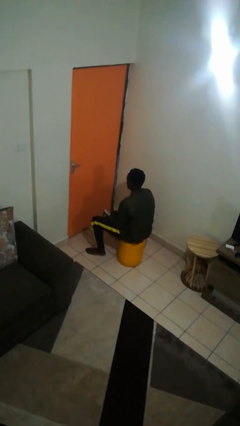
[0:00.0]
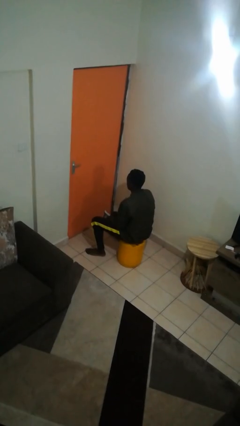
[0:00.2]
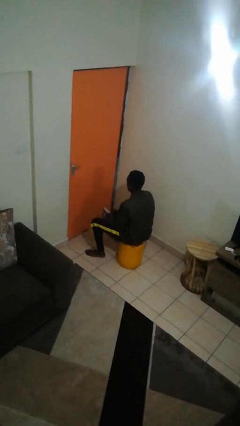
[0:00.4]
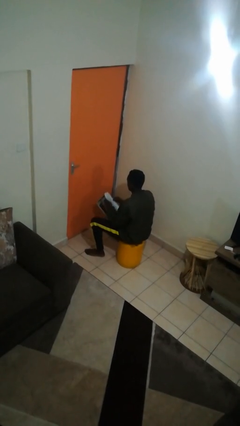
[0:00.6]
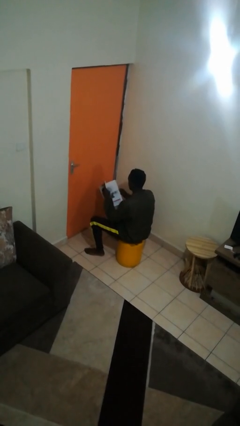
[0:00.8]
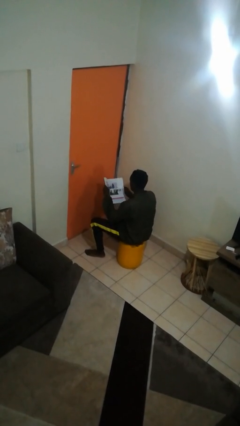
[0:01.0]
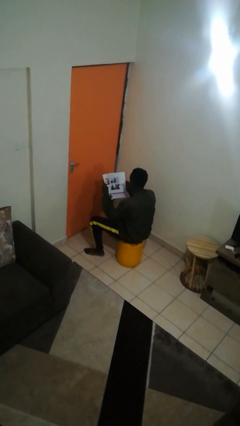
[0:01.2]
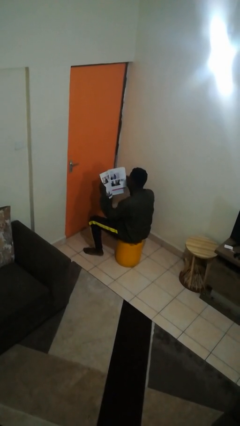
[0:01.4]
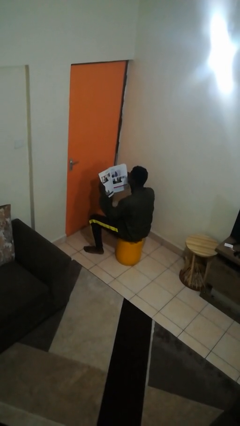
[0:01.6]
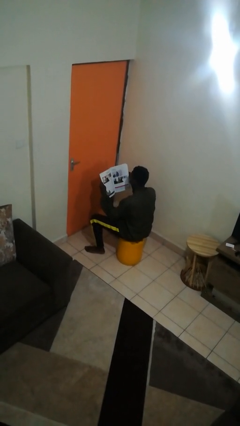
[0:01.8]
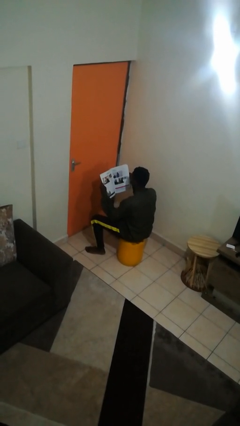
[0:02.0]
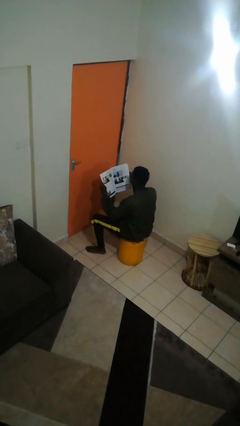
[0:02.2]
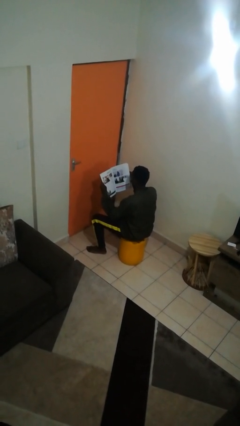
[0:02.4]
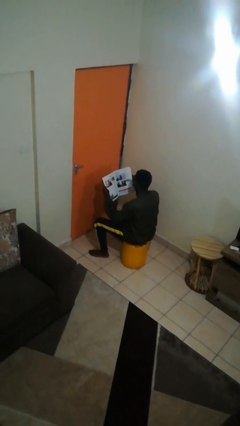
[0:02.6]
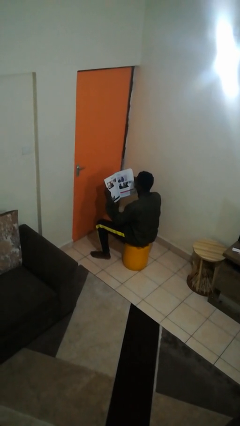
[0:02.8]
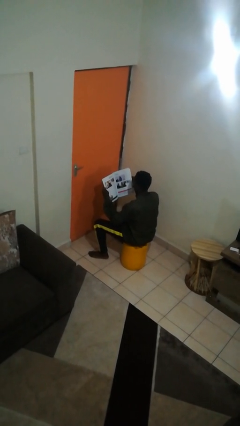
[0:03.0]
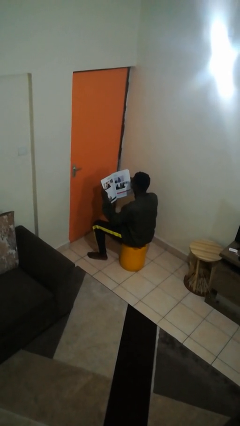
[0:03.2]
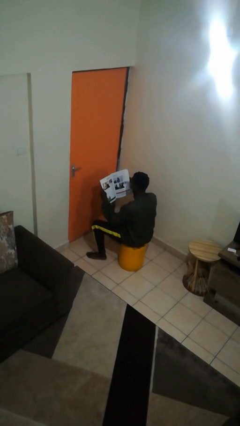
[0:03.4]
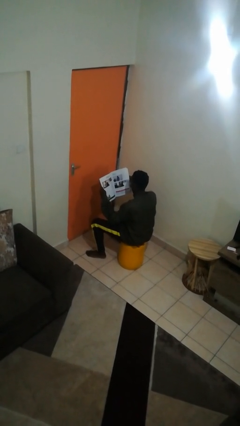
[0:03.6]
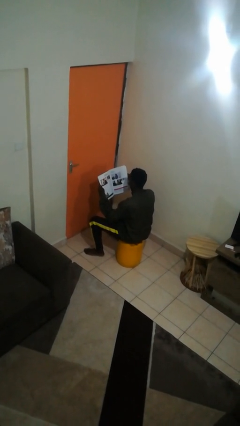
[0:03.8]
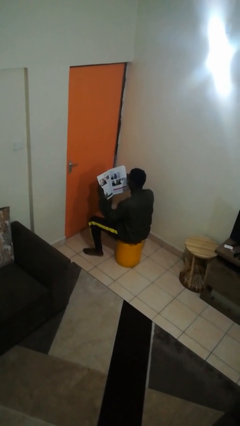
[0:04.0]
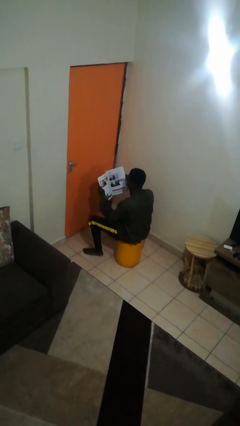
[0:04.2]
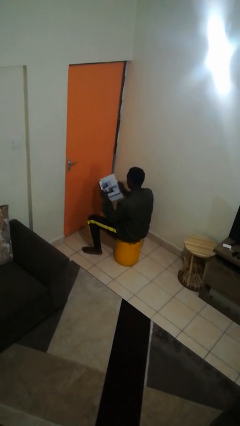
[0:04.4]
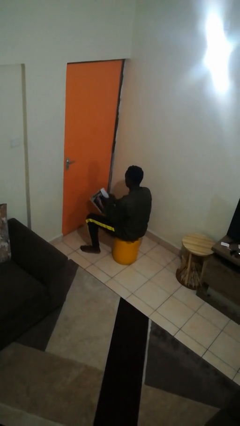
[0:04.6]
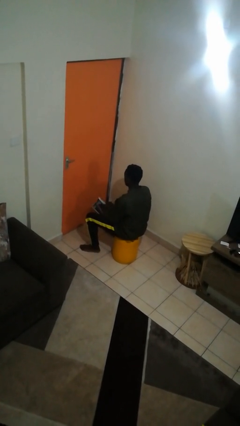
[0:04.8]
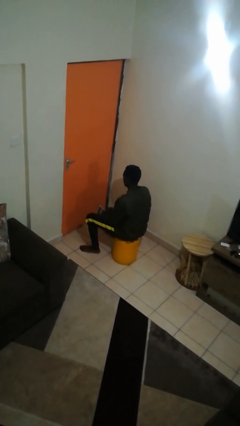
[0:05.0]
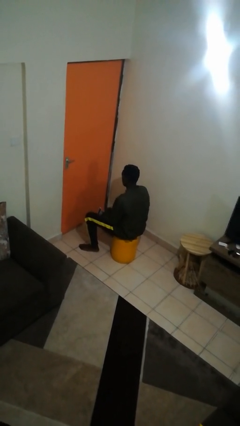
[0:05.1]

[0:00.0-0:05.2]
person reads magazine

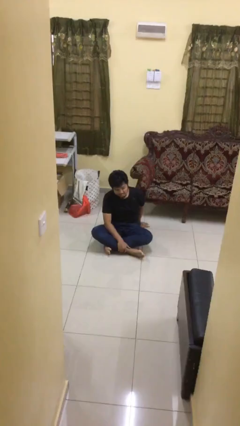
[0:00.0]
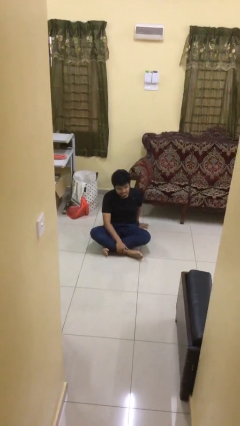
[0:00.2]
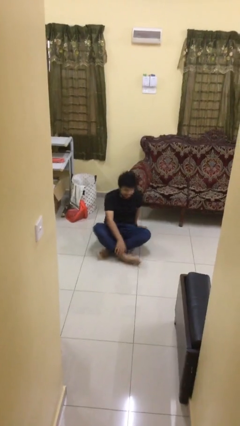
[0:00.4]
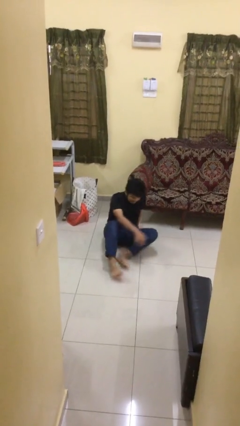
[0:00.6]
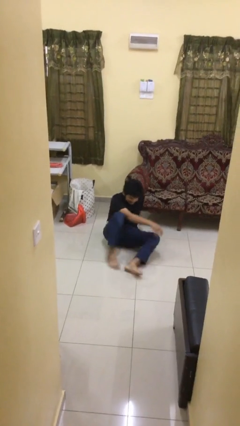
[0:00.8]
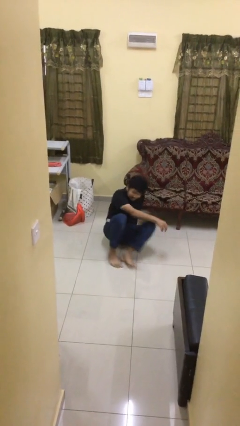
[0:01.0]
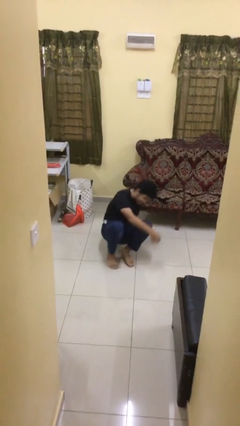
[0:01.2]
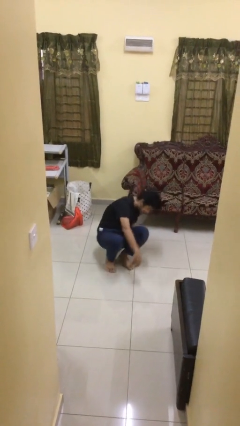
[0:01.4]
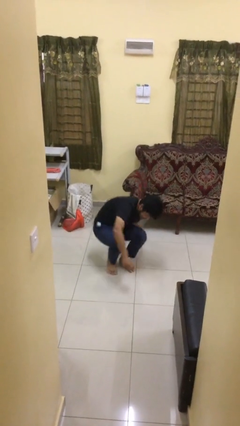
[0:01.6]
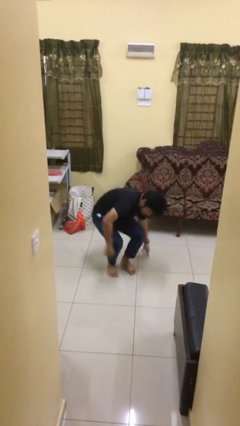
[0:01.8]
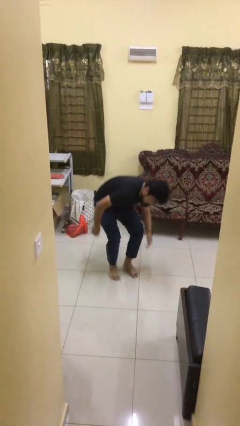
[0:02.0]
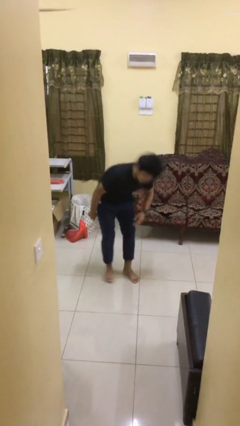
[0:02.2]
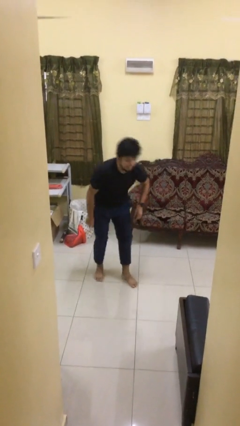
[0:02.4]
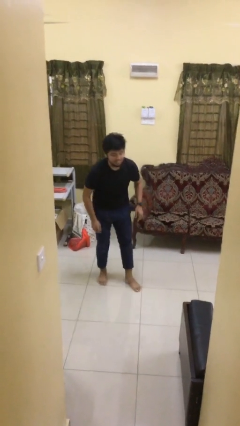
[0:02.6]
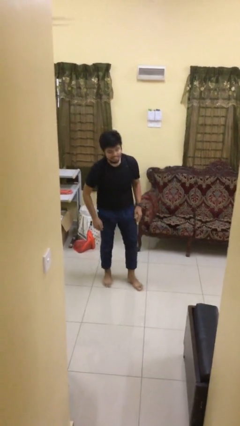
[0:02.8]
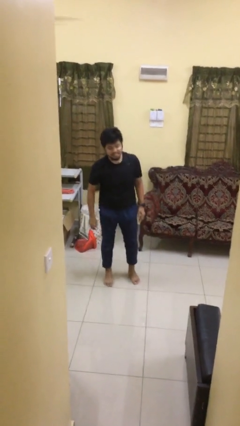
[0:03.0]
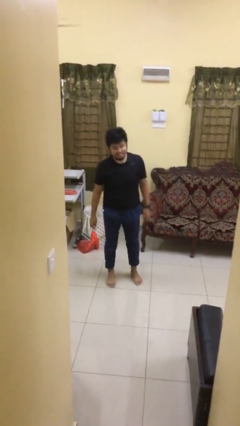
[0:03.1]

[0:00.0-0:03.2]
person stands up from floor

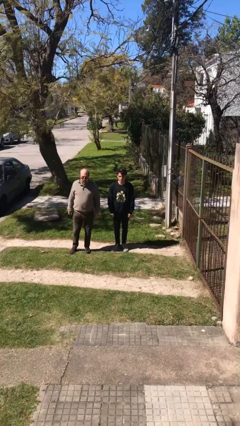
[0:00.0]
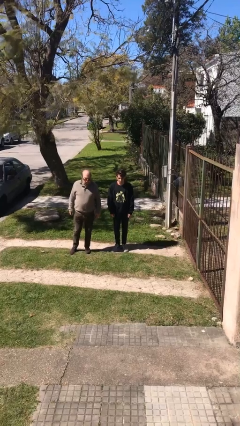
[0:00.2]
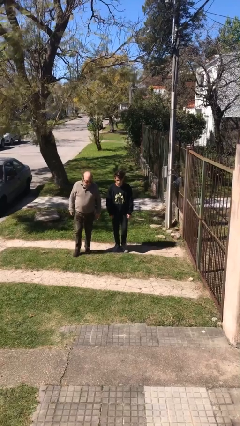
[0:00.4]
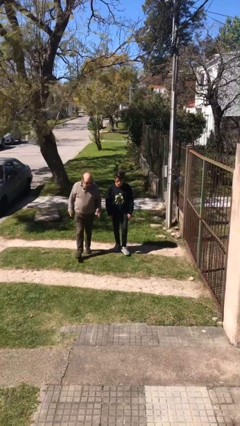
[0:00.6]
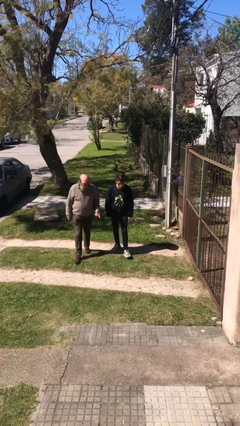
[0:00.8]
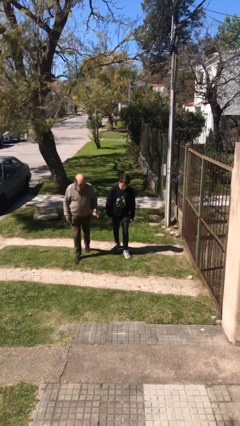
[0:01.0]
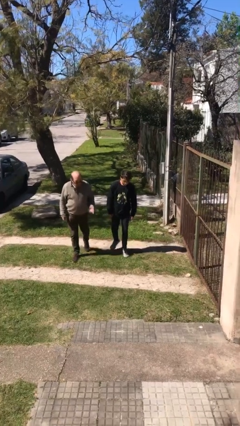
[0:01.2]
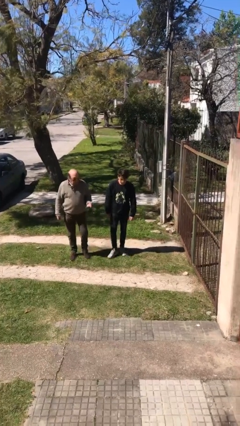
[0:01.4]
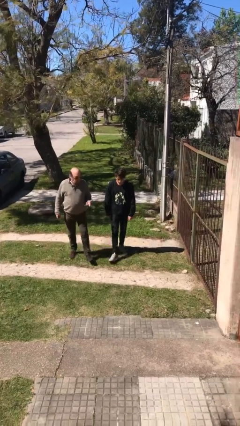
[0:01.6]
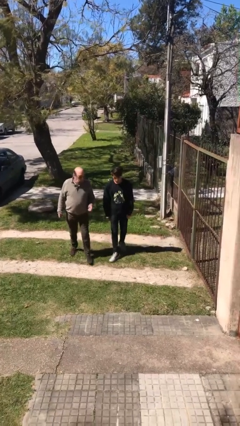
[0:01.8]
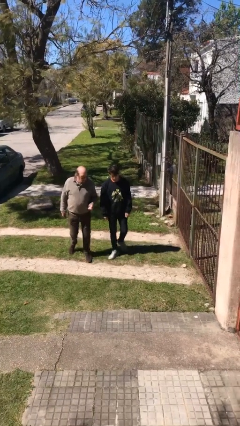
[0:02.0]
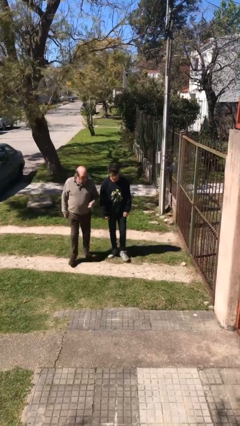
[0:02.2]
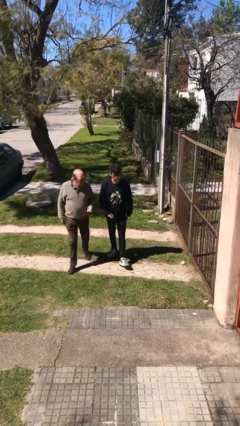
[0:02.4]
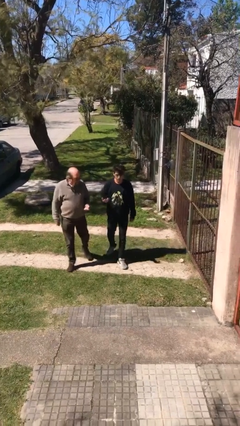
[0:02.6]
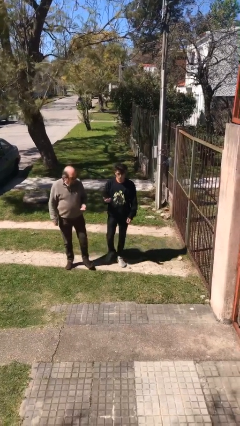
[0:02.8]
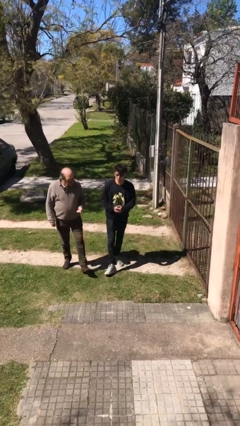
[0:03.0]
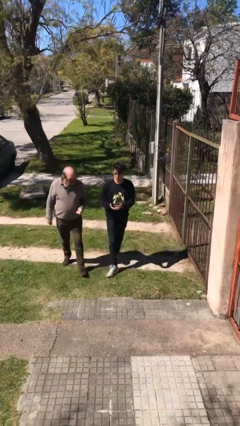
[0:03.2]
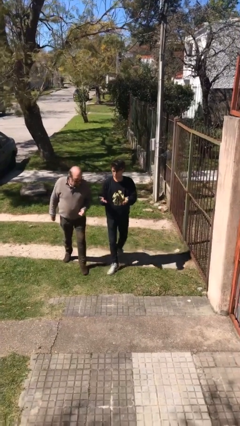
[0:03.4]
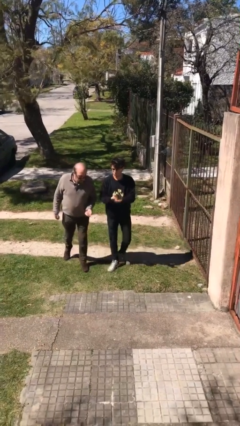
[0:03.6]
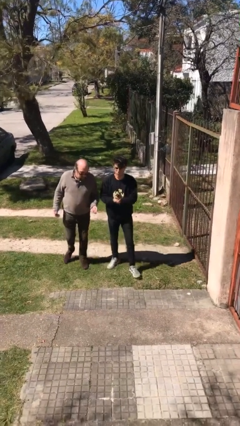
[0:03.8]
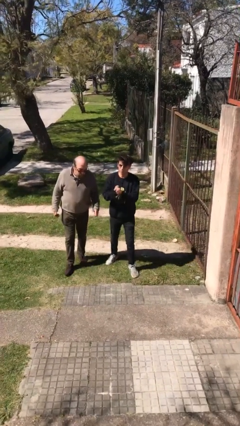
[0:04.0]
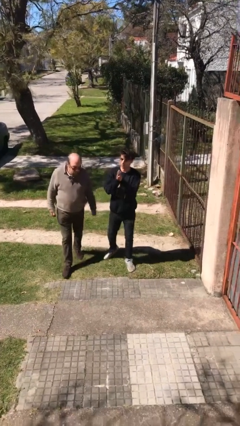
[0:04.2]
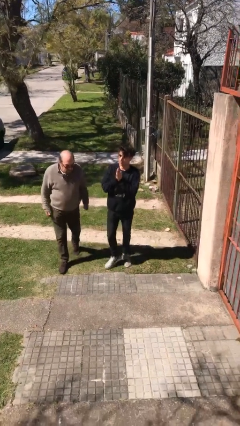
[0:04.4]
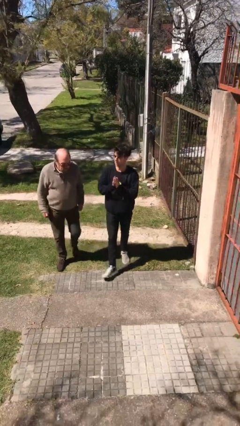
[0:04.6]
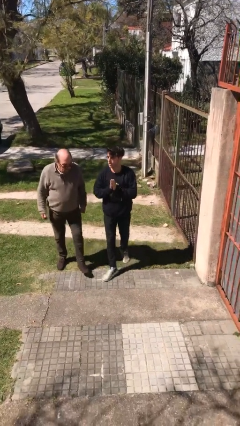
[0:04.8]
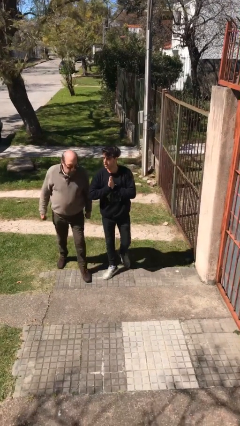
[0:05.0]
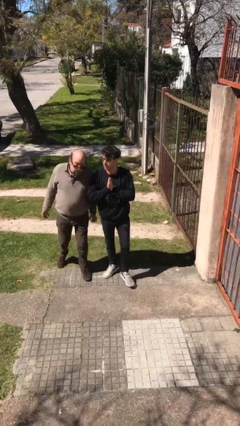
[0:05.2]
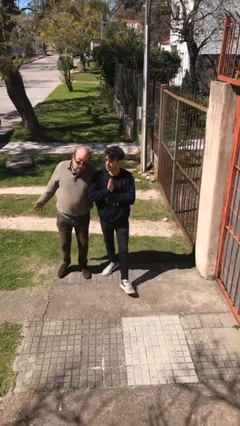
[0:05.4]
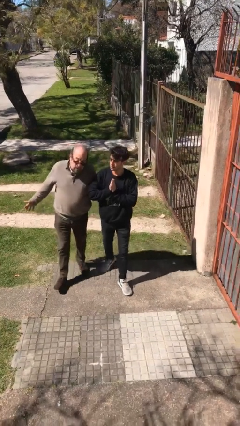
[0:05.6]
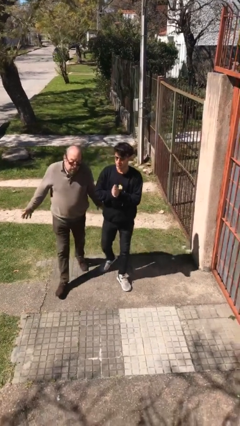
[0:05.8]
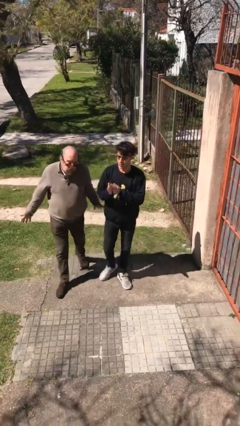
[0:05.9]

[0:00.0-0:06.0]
person talks to person

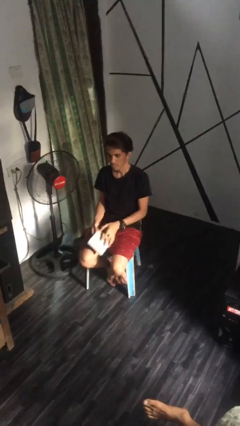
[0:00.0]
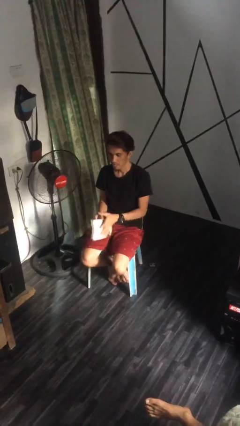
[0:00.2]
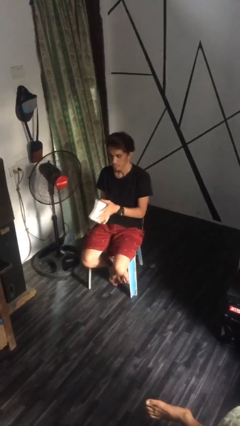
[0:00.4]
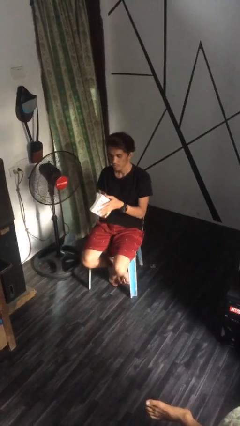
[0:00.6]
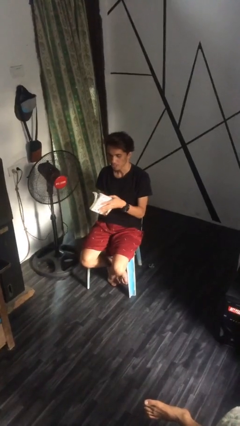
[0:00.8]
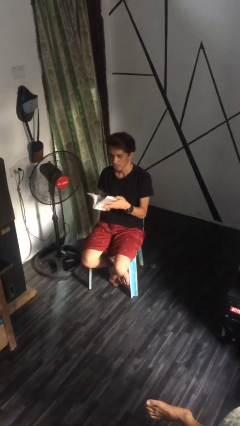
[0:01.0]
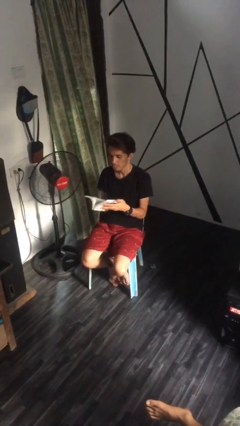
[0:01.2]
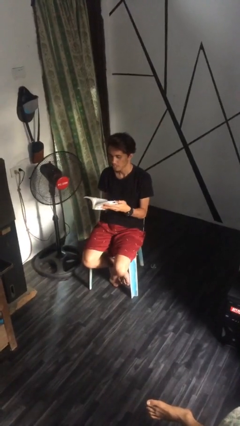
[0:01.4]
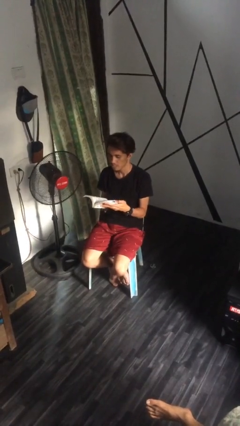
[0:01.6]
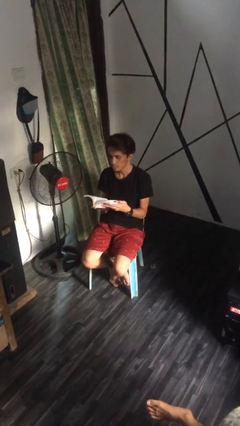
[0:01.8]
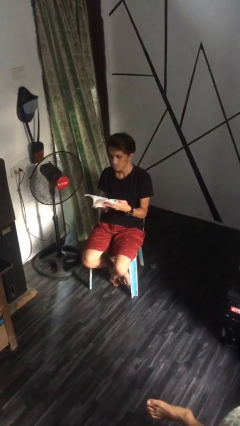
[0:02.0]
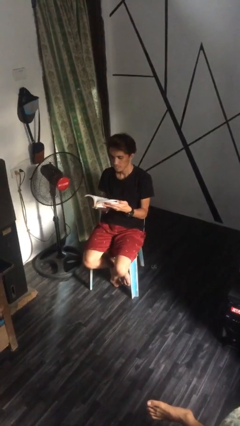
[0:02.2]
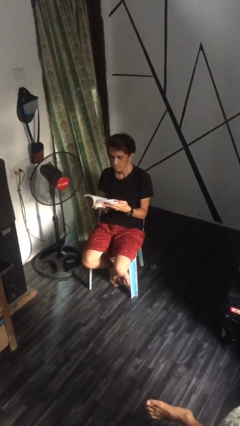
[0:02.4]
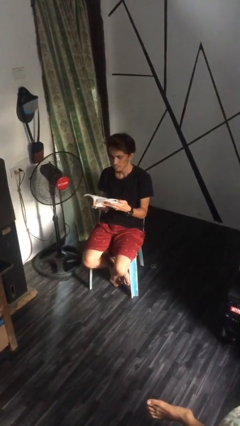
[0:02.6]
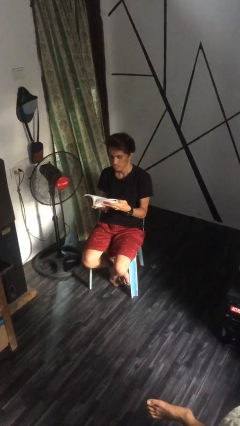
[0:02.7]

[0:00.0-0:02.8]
person reads document

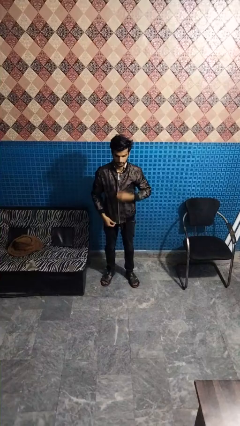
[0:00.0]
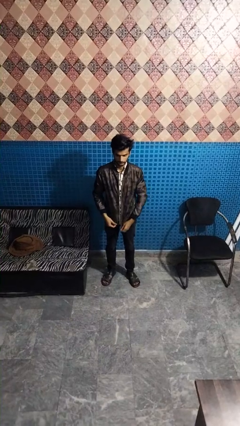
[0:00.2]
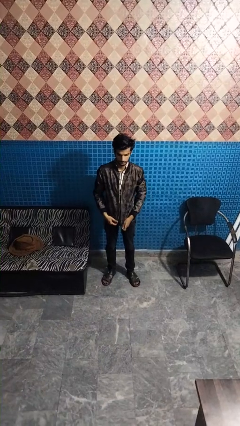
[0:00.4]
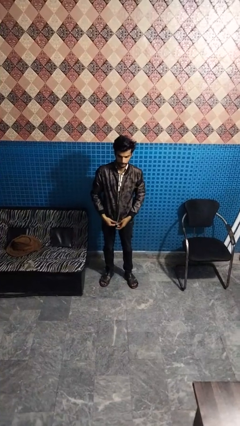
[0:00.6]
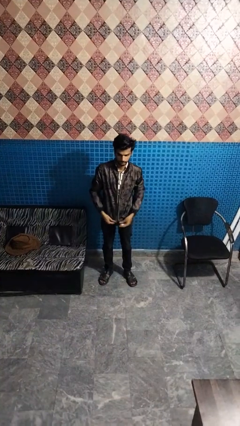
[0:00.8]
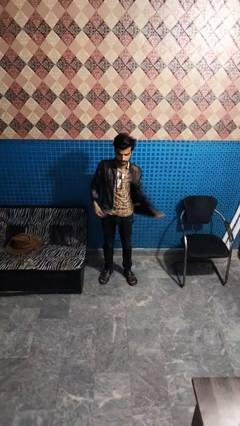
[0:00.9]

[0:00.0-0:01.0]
person unzips jacket
